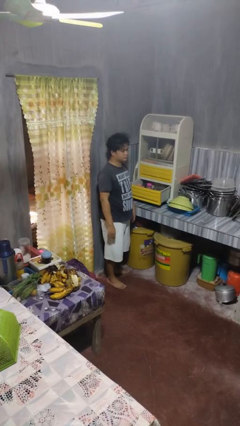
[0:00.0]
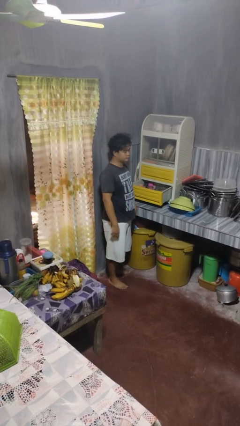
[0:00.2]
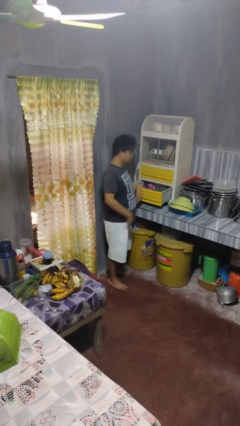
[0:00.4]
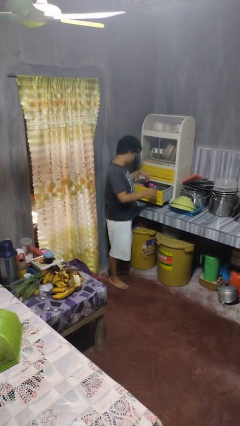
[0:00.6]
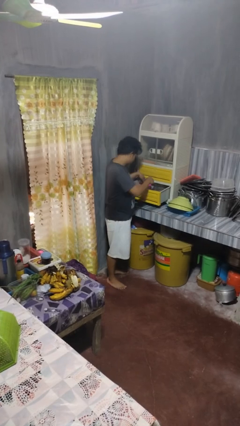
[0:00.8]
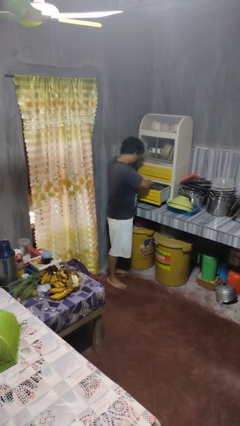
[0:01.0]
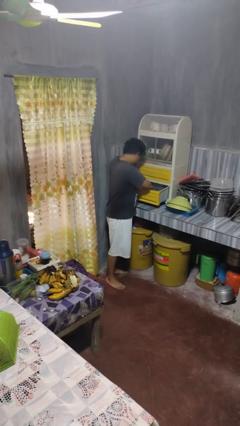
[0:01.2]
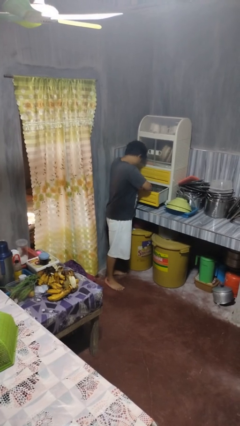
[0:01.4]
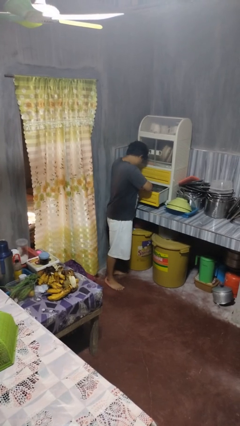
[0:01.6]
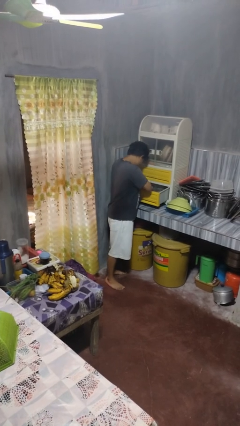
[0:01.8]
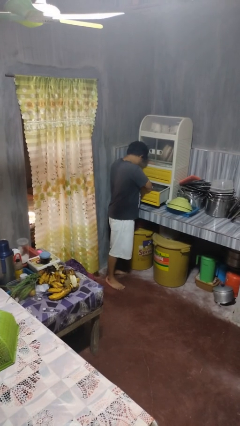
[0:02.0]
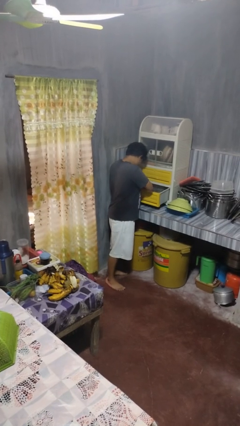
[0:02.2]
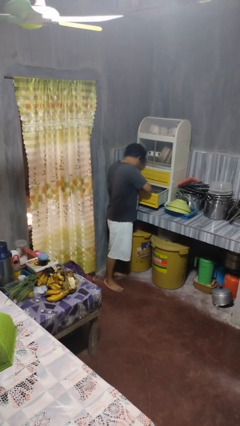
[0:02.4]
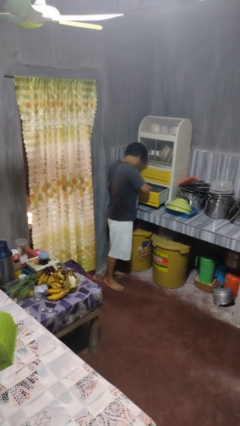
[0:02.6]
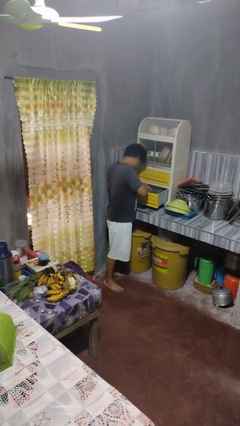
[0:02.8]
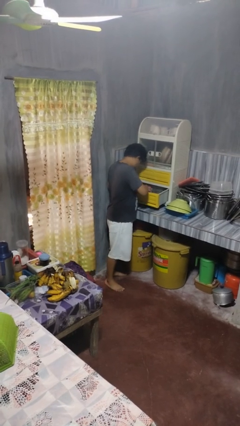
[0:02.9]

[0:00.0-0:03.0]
person searches in kitchen drawer

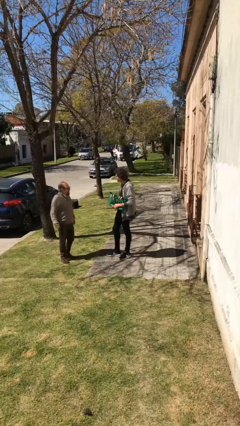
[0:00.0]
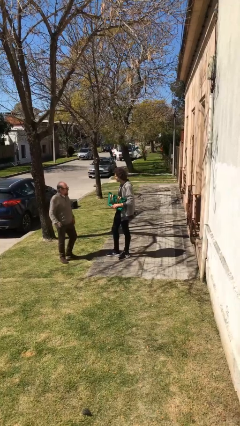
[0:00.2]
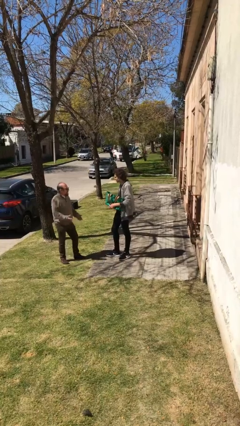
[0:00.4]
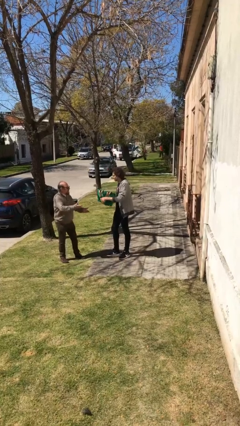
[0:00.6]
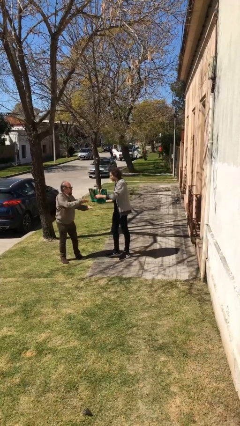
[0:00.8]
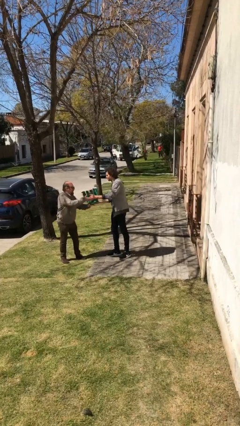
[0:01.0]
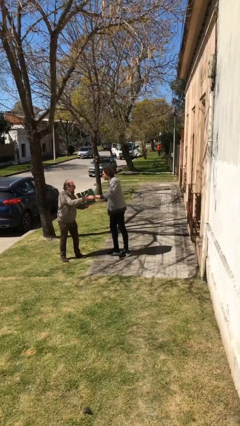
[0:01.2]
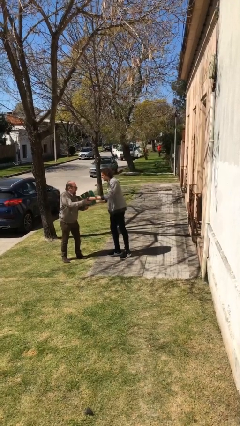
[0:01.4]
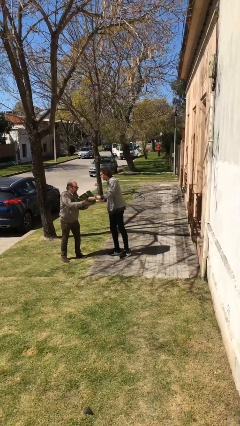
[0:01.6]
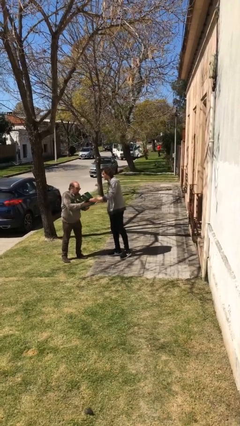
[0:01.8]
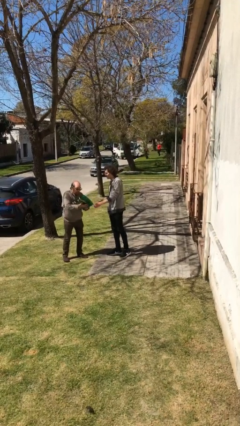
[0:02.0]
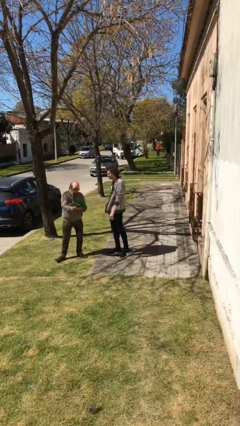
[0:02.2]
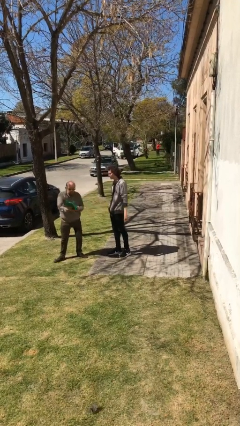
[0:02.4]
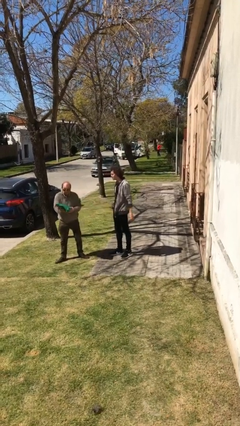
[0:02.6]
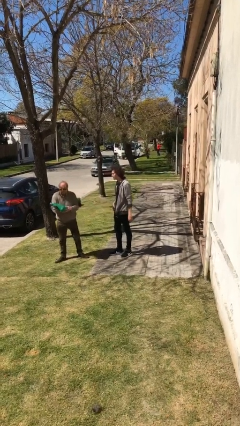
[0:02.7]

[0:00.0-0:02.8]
person transfers object to person

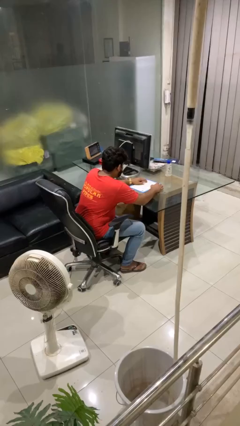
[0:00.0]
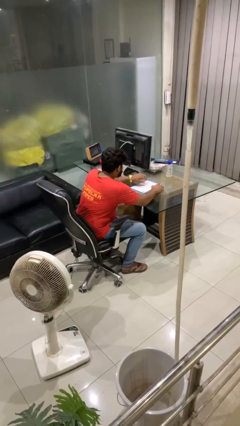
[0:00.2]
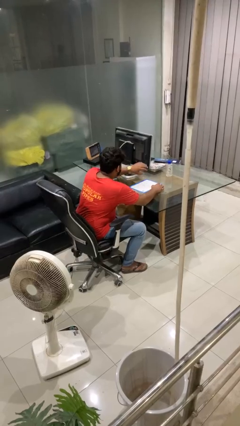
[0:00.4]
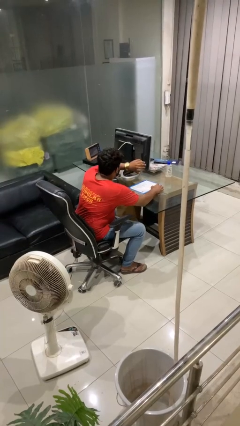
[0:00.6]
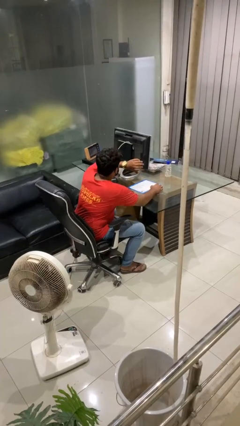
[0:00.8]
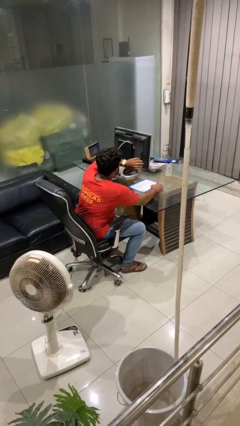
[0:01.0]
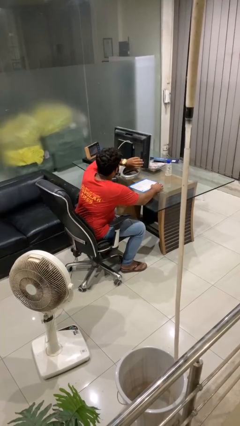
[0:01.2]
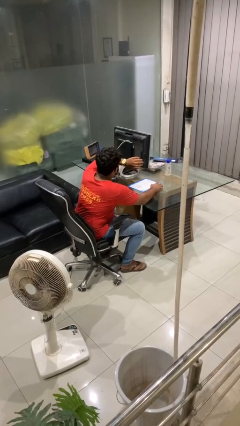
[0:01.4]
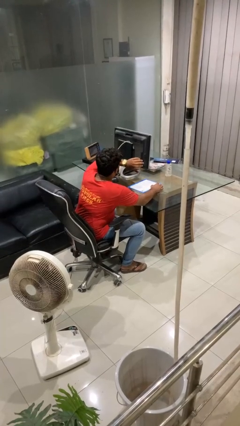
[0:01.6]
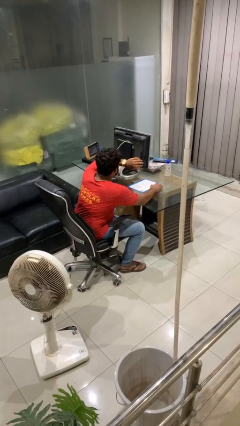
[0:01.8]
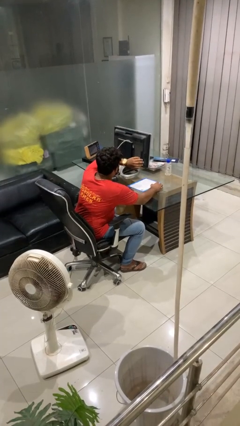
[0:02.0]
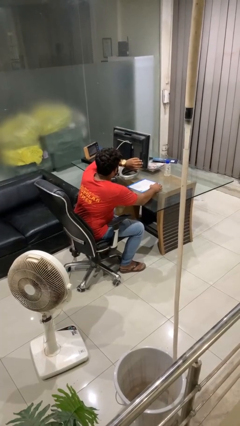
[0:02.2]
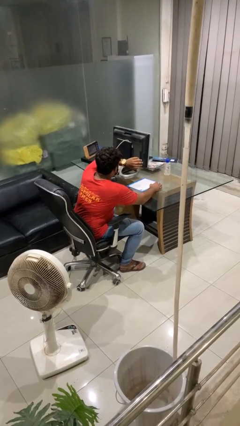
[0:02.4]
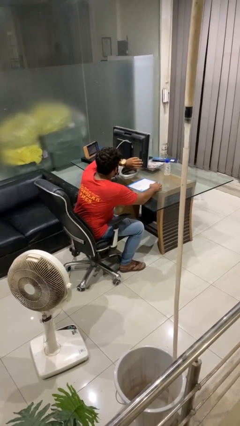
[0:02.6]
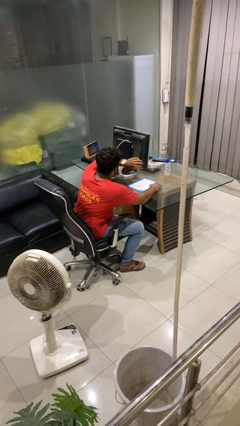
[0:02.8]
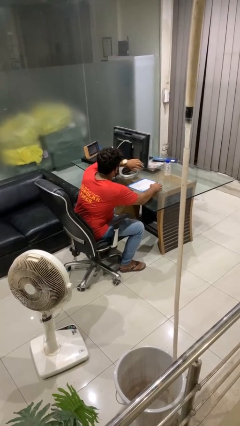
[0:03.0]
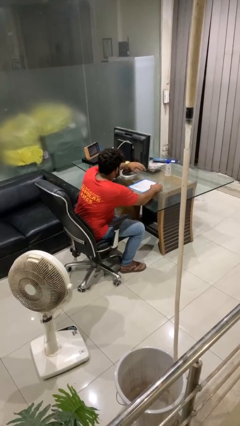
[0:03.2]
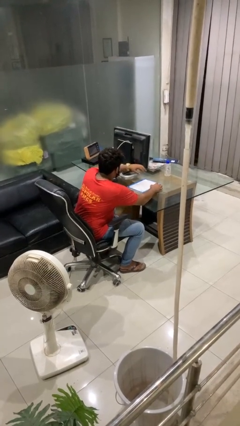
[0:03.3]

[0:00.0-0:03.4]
person looks at wristwatch

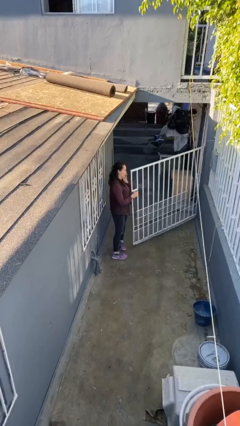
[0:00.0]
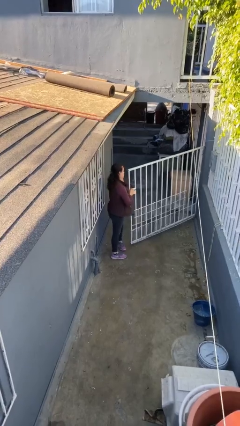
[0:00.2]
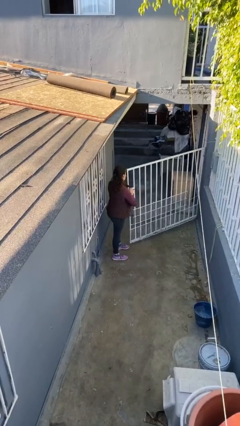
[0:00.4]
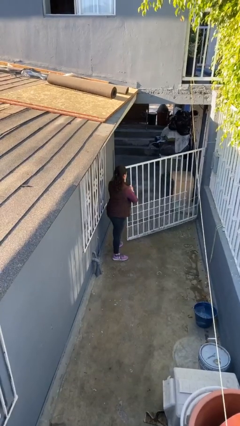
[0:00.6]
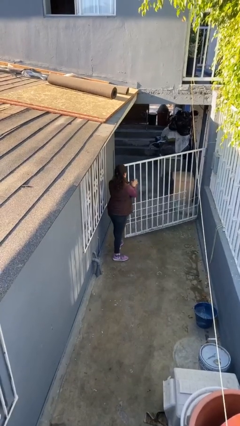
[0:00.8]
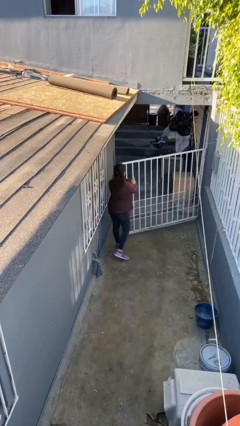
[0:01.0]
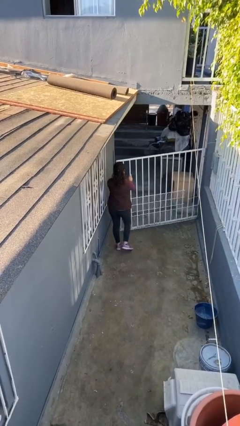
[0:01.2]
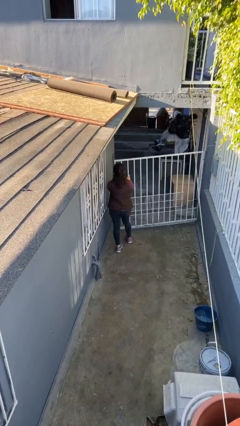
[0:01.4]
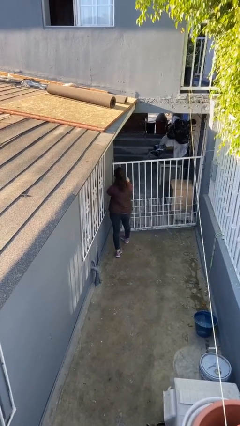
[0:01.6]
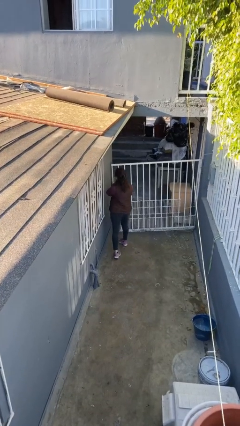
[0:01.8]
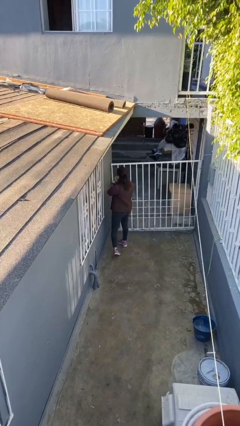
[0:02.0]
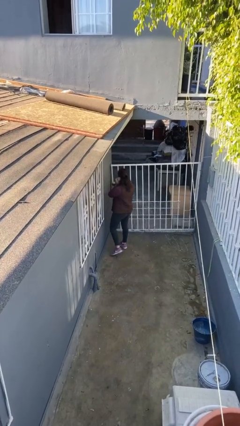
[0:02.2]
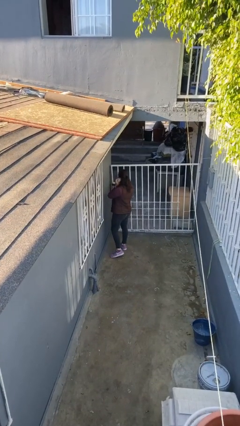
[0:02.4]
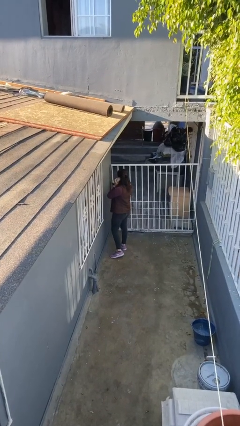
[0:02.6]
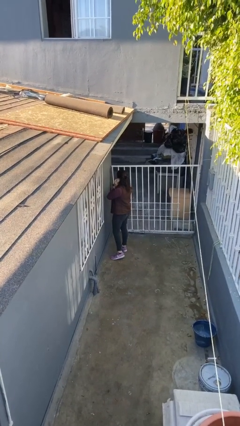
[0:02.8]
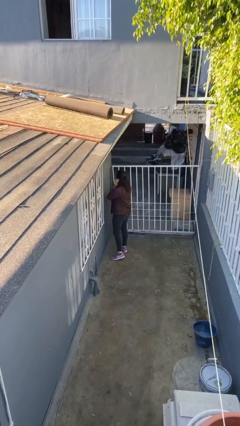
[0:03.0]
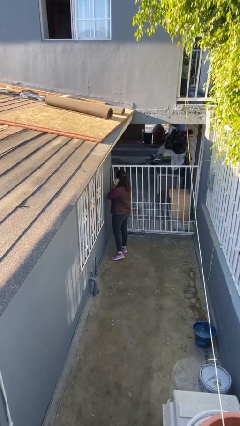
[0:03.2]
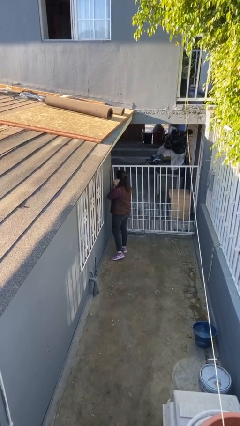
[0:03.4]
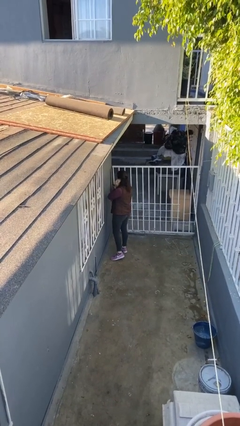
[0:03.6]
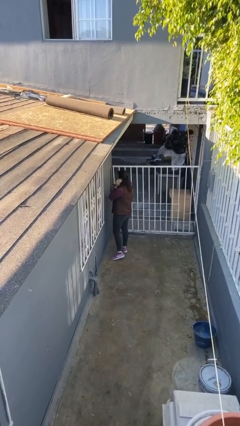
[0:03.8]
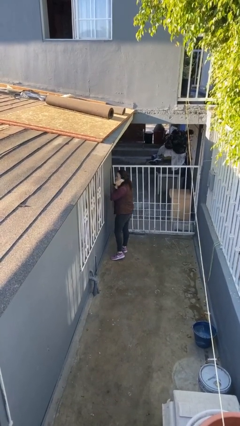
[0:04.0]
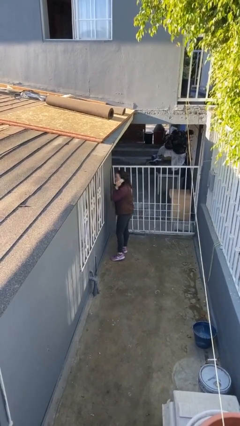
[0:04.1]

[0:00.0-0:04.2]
person closes facility door

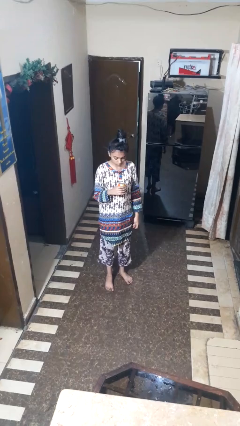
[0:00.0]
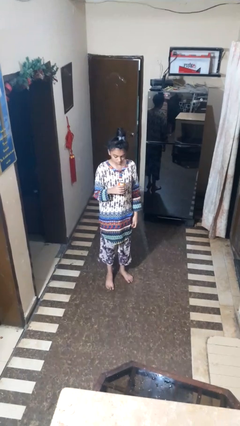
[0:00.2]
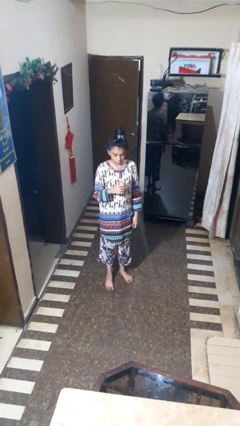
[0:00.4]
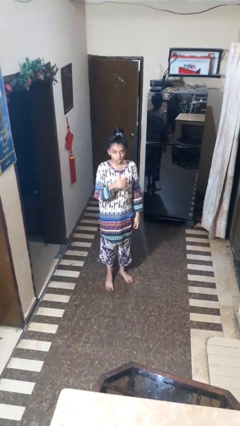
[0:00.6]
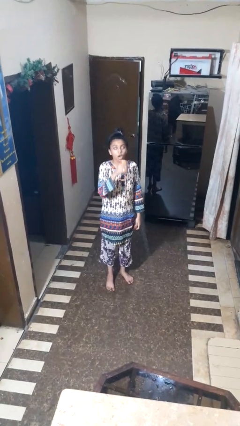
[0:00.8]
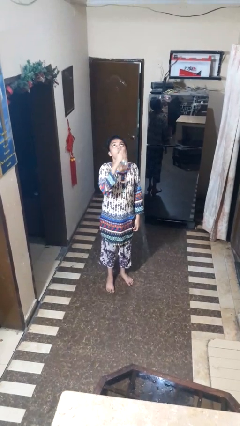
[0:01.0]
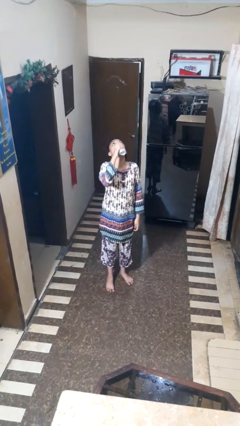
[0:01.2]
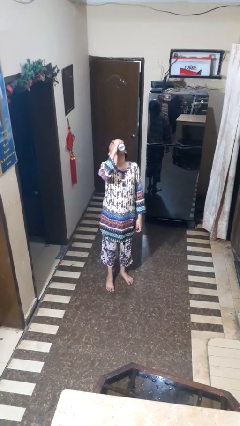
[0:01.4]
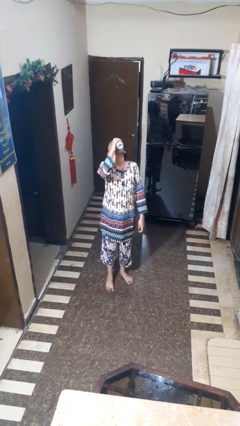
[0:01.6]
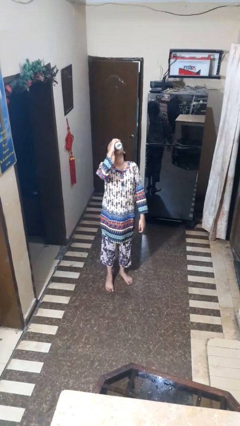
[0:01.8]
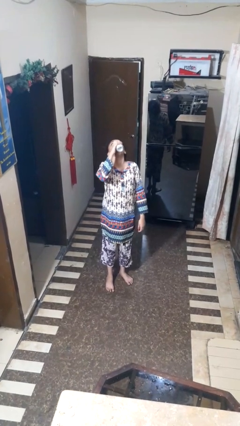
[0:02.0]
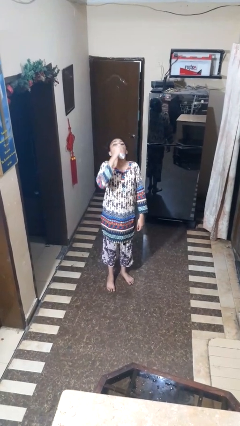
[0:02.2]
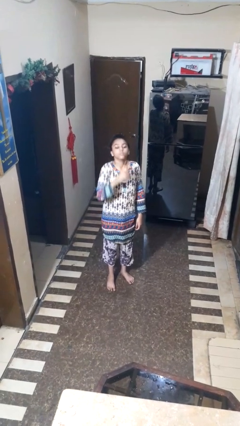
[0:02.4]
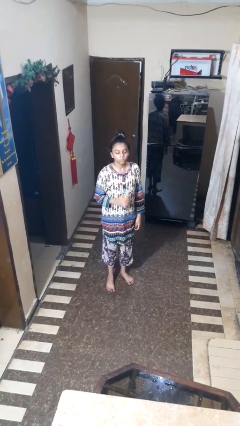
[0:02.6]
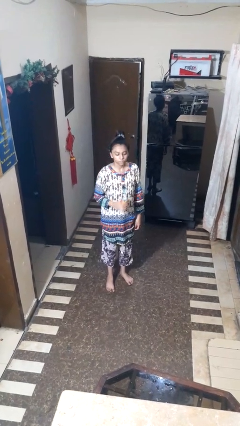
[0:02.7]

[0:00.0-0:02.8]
person drinks from beverage can

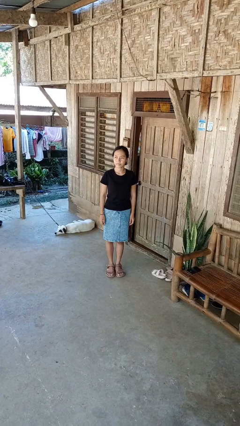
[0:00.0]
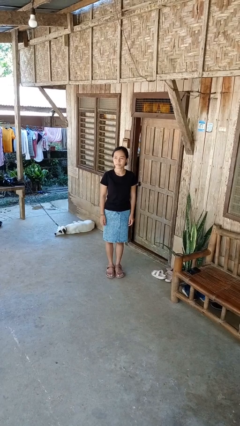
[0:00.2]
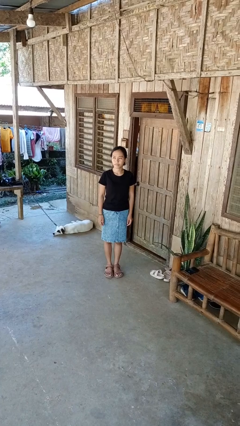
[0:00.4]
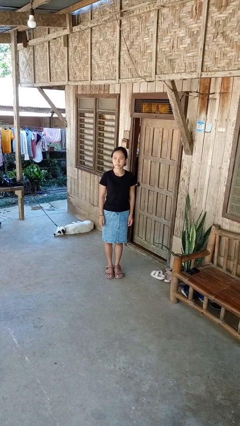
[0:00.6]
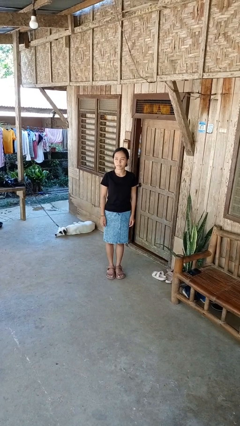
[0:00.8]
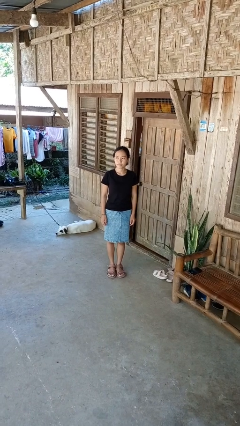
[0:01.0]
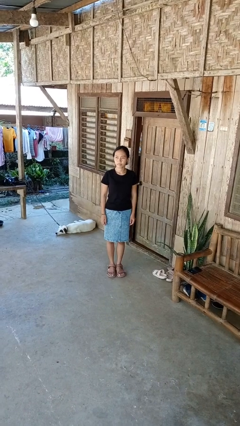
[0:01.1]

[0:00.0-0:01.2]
person stands up from floor

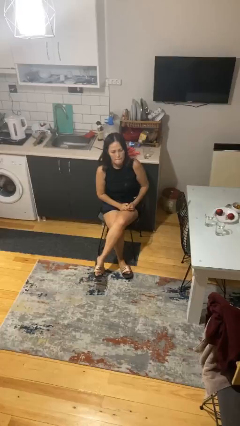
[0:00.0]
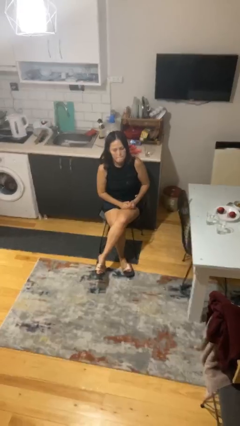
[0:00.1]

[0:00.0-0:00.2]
person takes off ring
